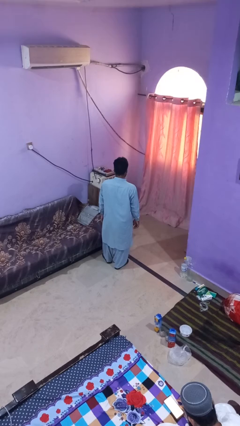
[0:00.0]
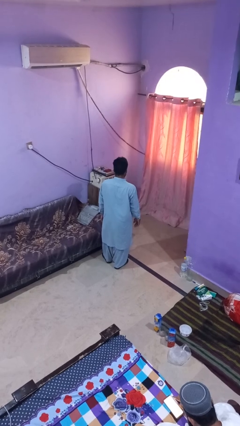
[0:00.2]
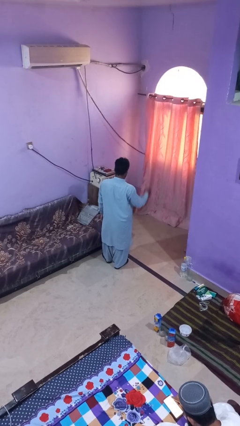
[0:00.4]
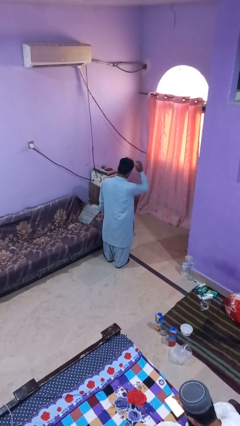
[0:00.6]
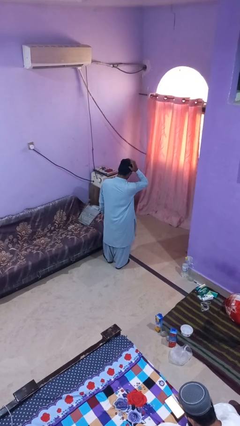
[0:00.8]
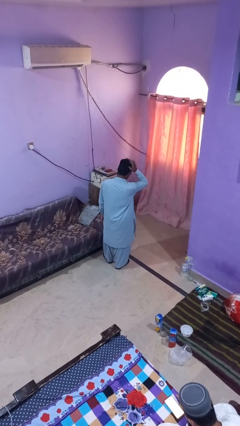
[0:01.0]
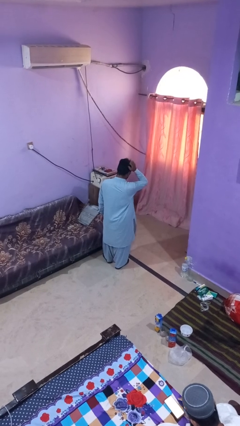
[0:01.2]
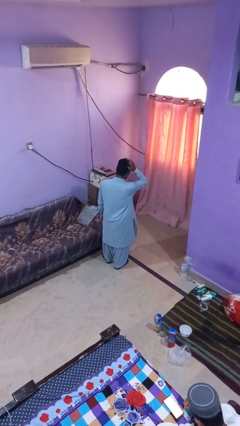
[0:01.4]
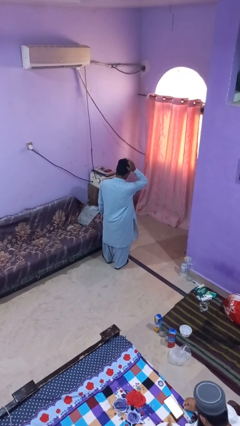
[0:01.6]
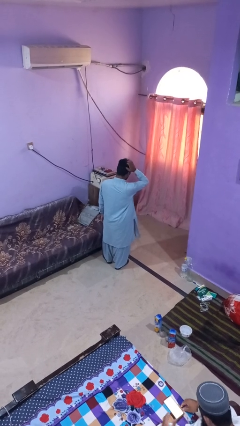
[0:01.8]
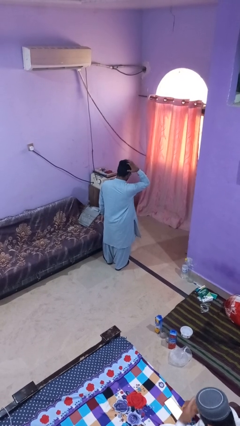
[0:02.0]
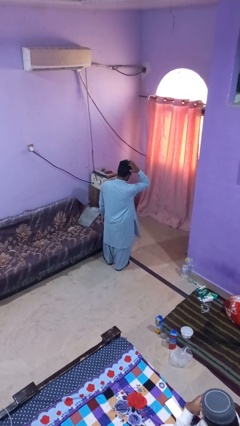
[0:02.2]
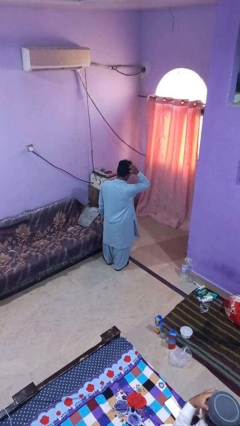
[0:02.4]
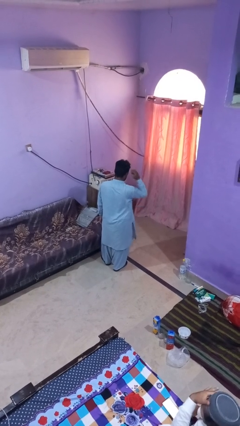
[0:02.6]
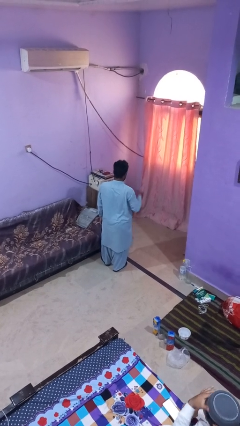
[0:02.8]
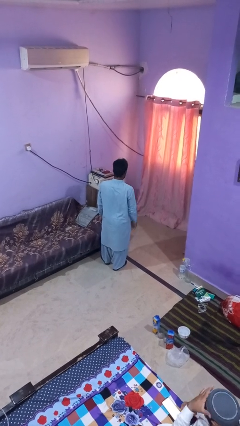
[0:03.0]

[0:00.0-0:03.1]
person scratches face

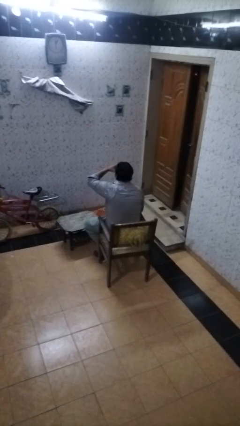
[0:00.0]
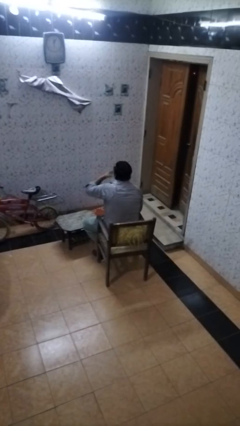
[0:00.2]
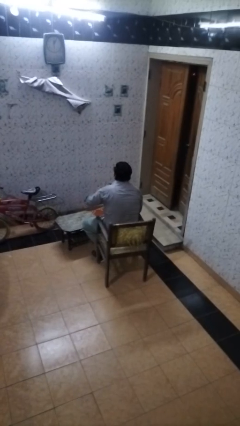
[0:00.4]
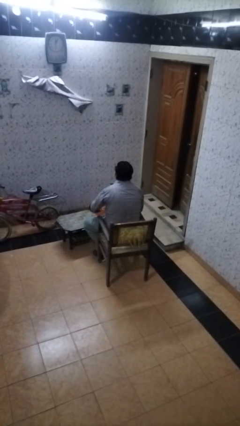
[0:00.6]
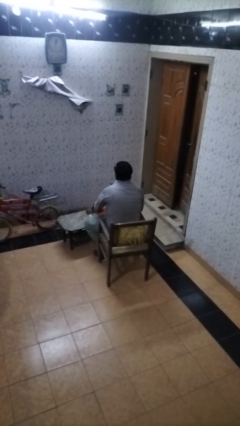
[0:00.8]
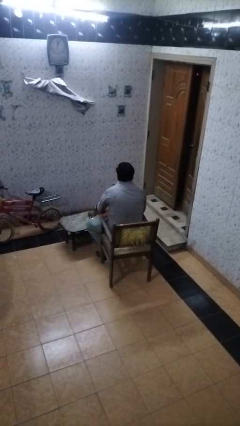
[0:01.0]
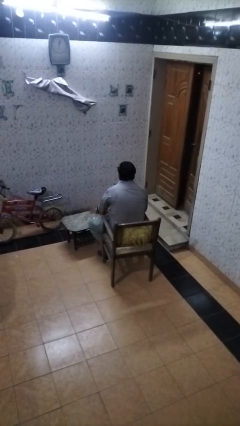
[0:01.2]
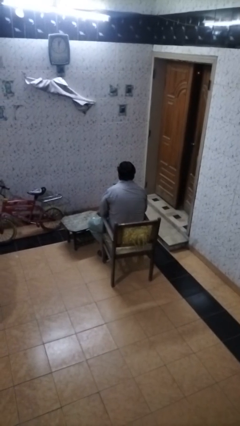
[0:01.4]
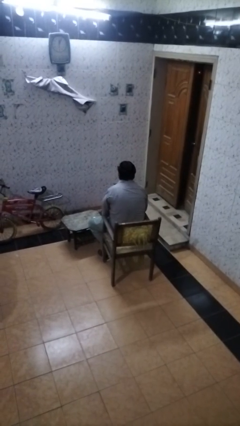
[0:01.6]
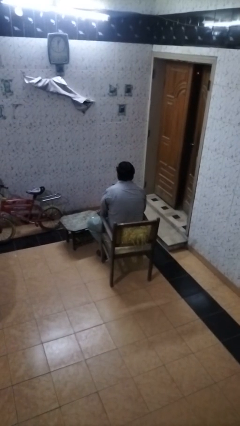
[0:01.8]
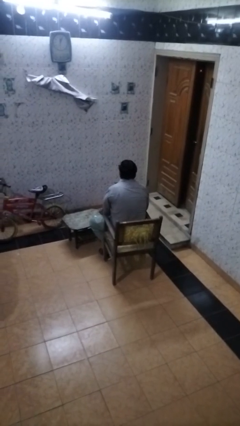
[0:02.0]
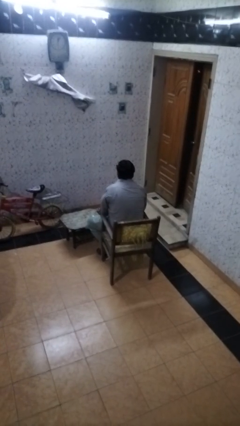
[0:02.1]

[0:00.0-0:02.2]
person puts down object on table

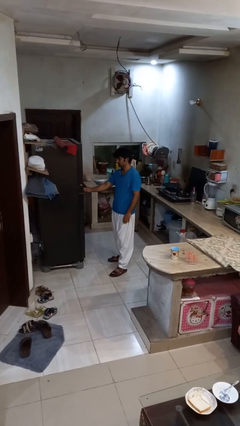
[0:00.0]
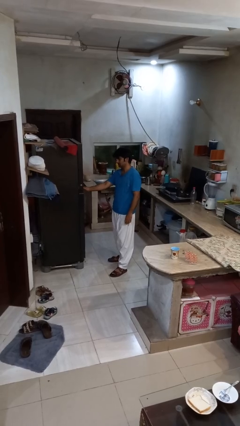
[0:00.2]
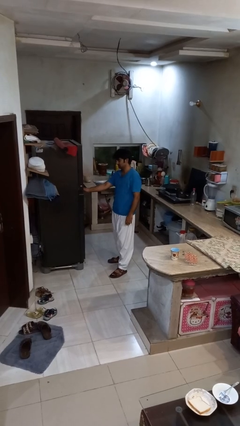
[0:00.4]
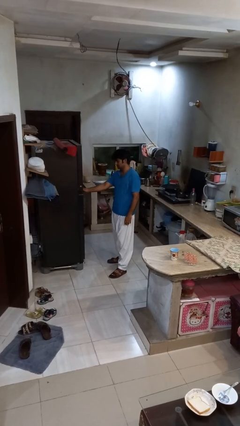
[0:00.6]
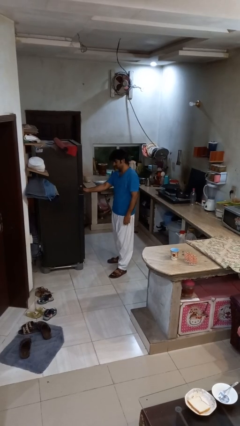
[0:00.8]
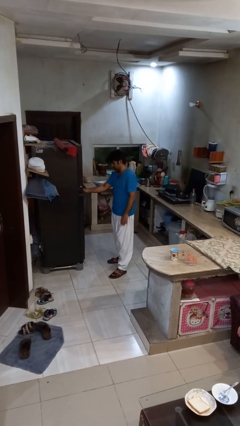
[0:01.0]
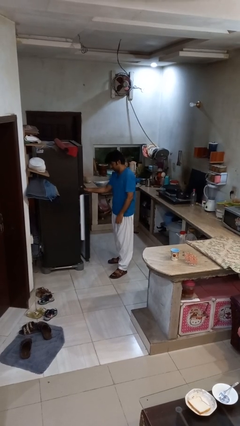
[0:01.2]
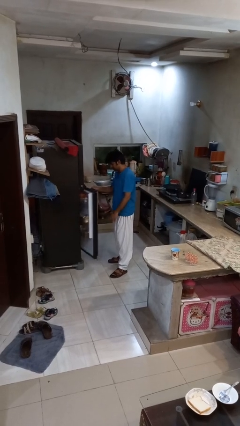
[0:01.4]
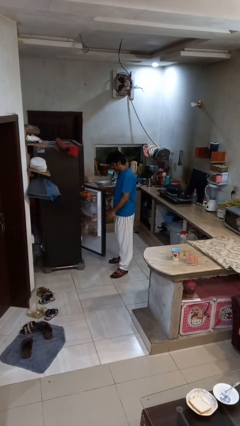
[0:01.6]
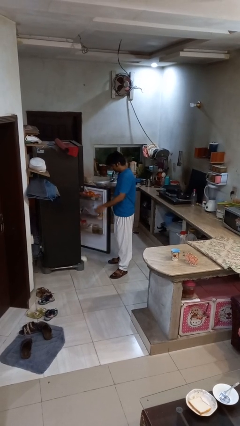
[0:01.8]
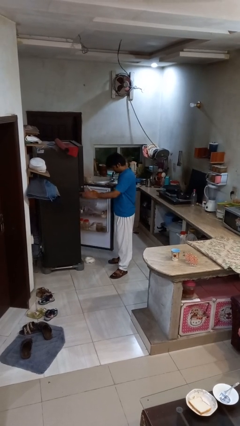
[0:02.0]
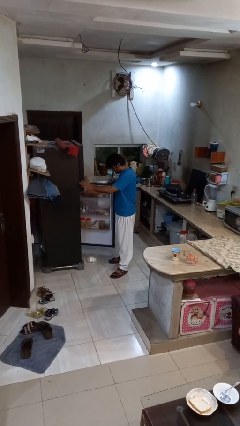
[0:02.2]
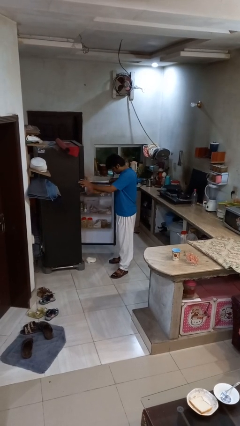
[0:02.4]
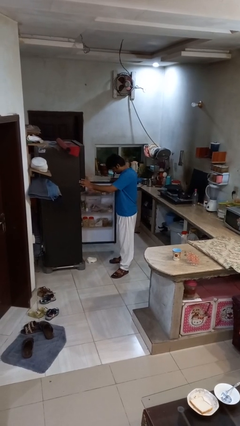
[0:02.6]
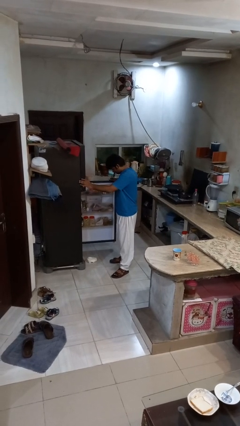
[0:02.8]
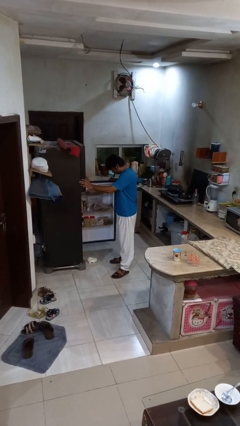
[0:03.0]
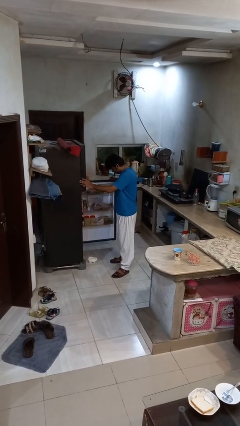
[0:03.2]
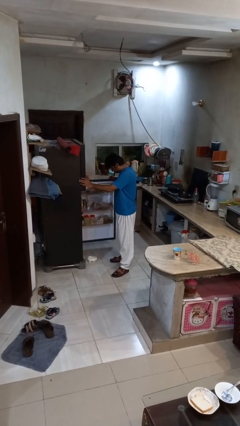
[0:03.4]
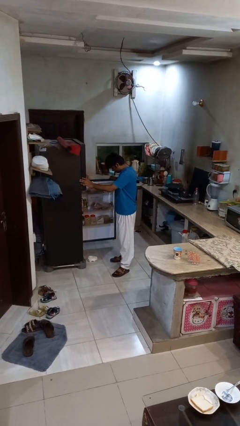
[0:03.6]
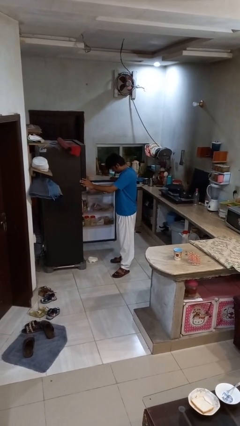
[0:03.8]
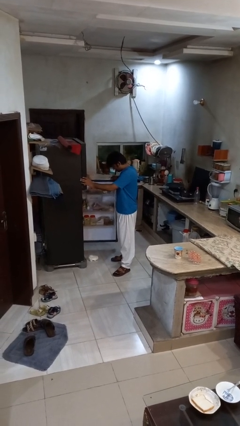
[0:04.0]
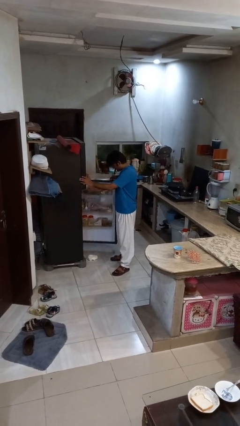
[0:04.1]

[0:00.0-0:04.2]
person opens refrigerator

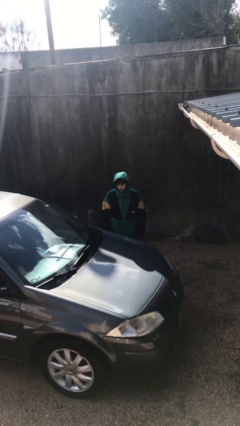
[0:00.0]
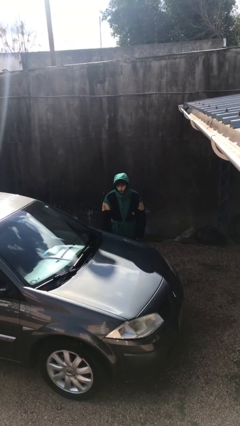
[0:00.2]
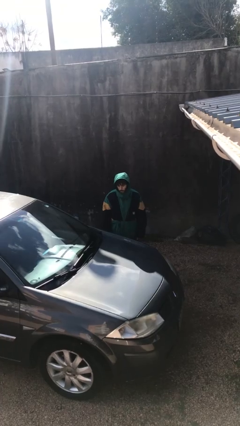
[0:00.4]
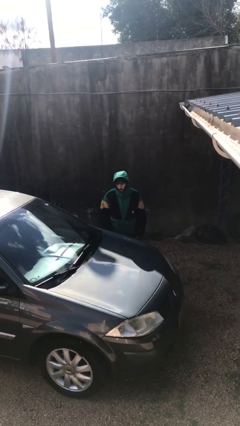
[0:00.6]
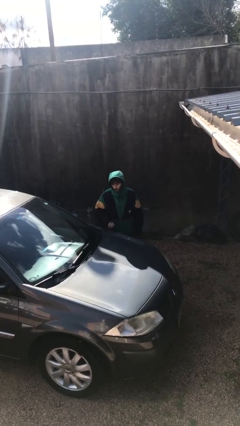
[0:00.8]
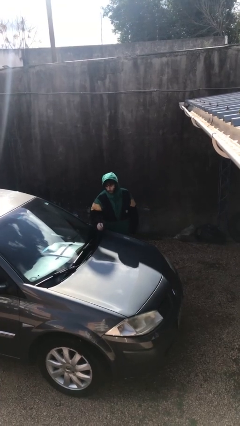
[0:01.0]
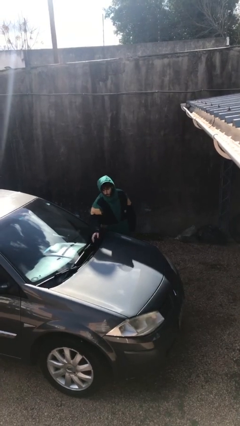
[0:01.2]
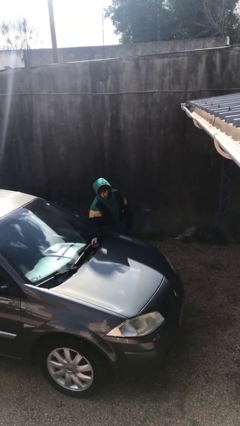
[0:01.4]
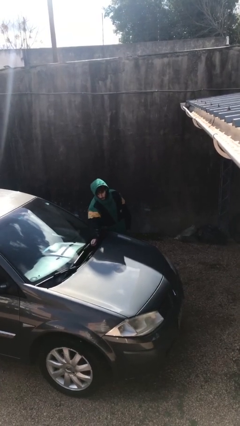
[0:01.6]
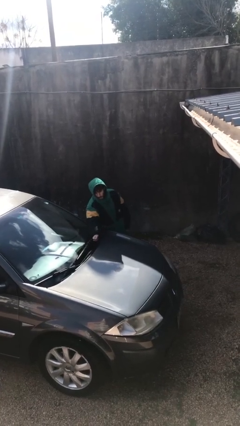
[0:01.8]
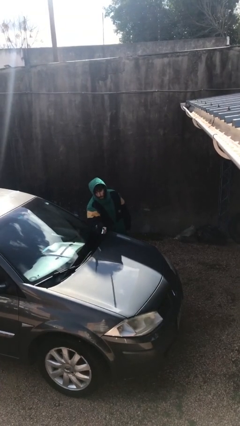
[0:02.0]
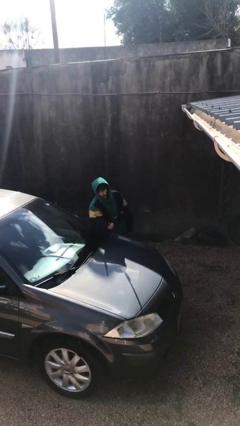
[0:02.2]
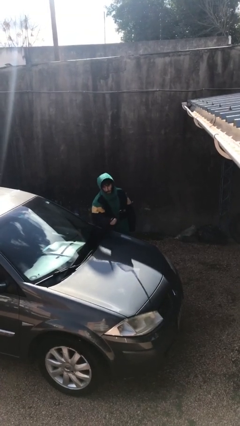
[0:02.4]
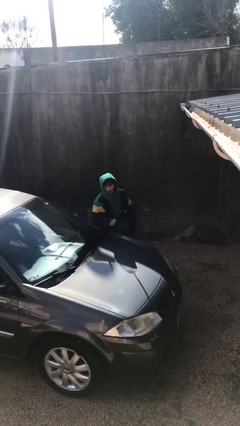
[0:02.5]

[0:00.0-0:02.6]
person flips up car wipers

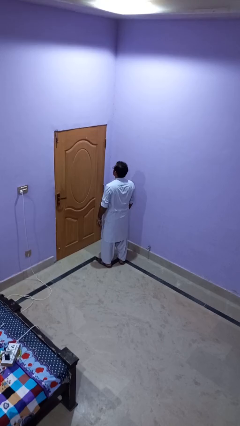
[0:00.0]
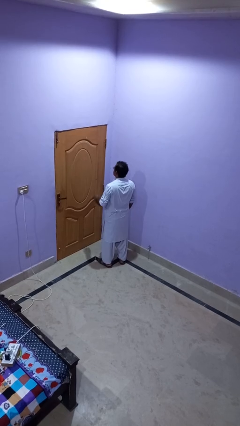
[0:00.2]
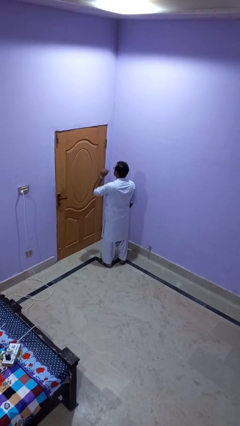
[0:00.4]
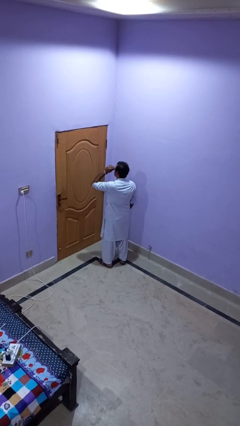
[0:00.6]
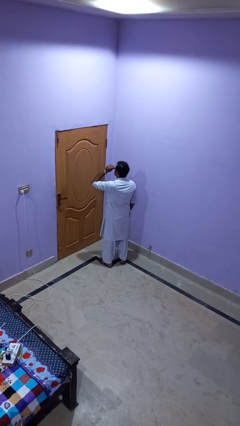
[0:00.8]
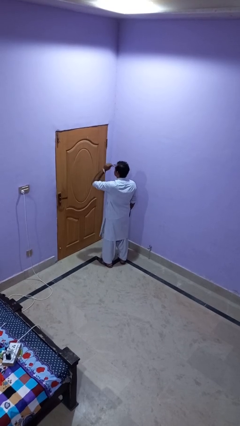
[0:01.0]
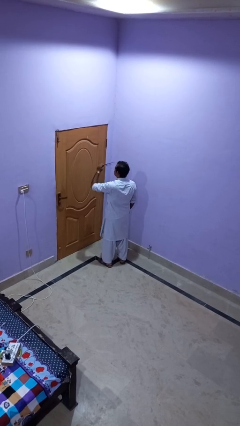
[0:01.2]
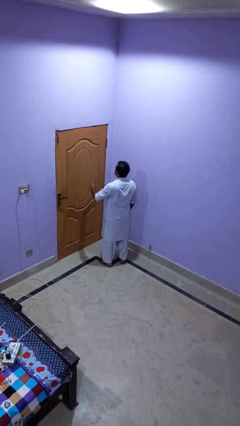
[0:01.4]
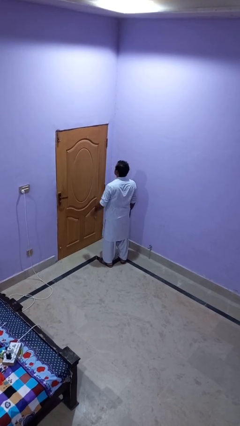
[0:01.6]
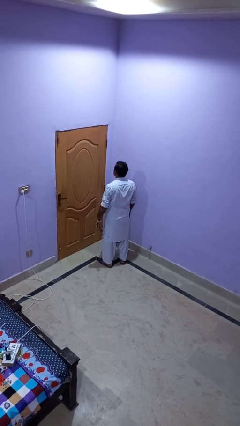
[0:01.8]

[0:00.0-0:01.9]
person takes off glasses

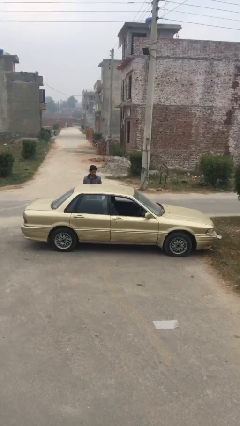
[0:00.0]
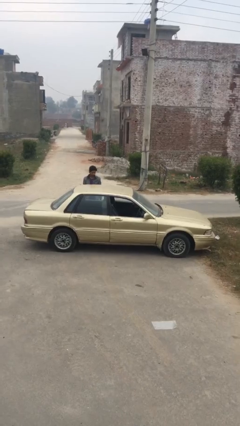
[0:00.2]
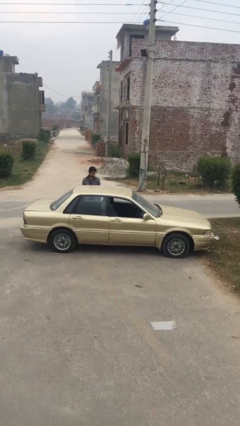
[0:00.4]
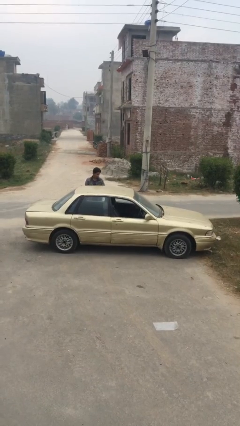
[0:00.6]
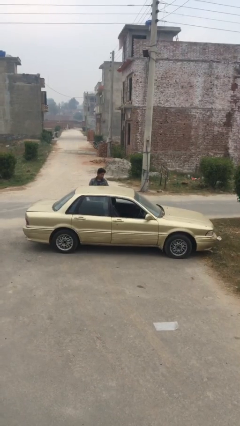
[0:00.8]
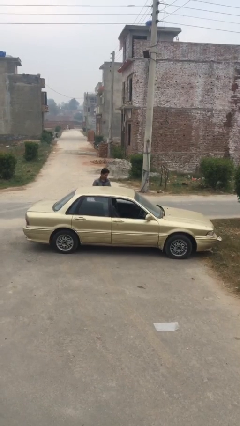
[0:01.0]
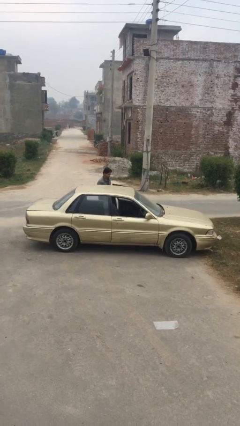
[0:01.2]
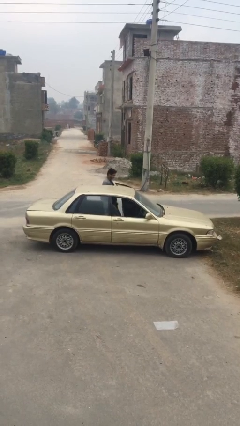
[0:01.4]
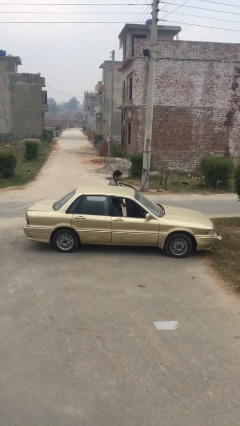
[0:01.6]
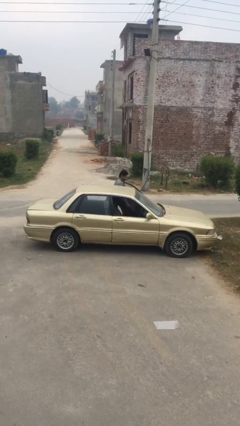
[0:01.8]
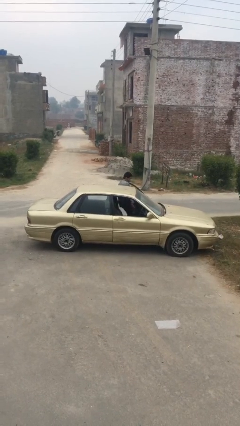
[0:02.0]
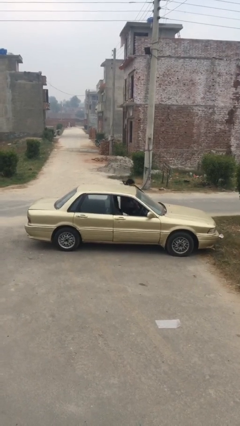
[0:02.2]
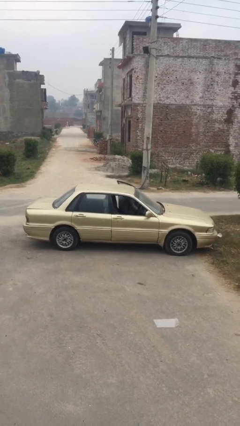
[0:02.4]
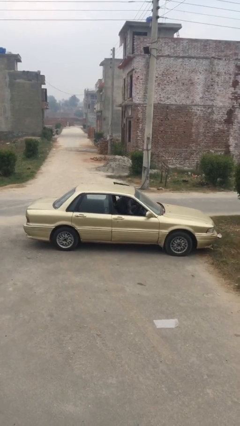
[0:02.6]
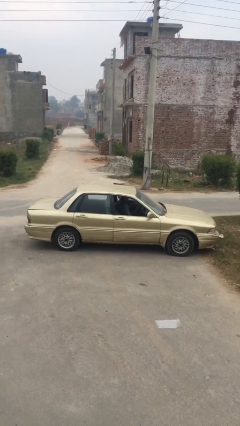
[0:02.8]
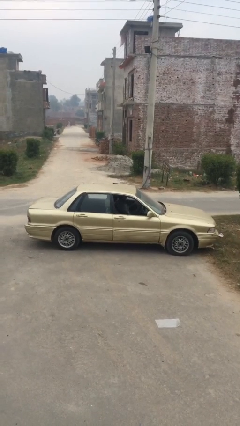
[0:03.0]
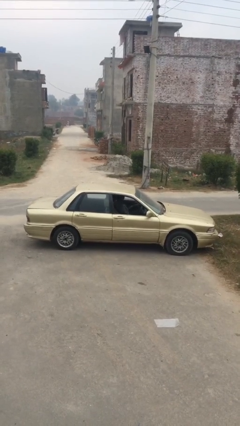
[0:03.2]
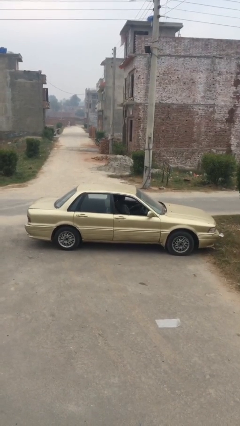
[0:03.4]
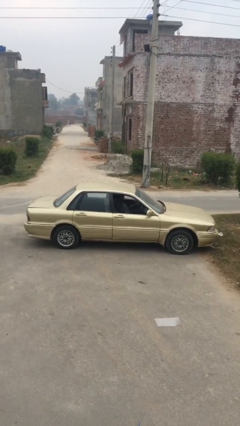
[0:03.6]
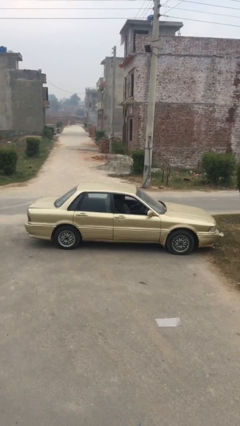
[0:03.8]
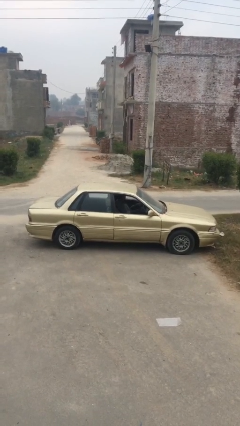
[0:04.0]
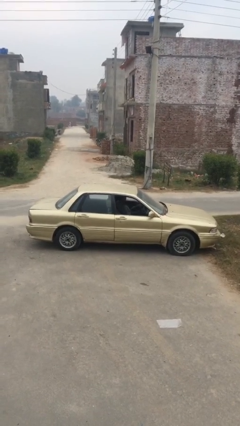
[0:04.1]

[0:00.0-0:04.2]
car picks up person
